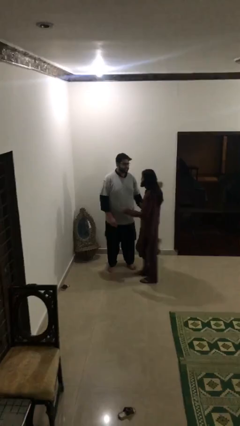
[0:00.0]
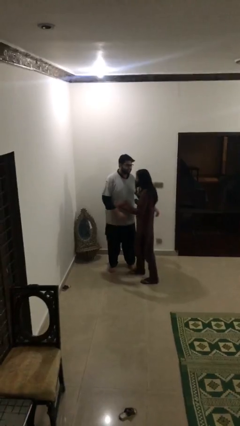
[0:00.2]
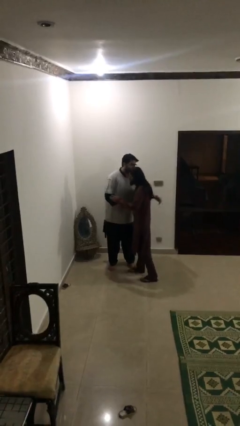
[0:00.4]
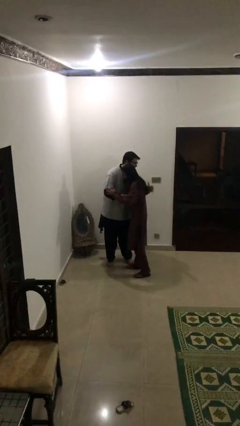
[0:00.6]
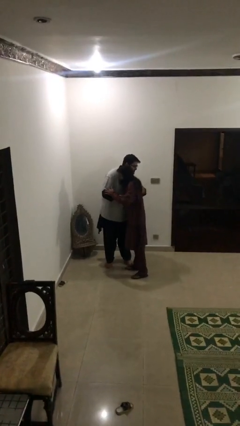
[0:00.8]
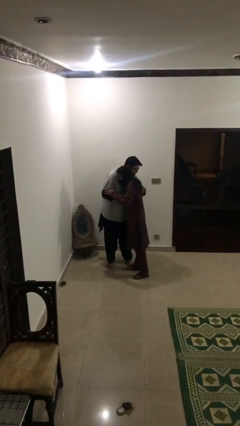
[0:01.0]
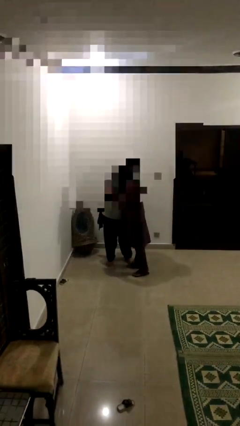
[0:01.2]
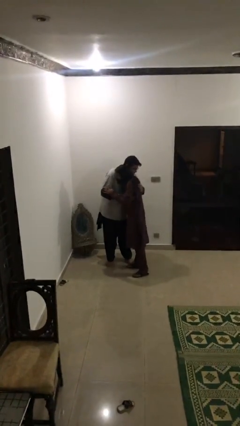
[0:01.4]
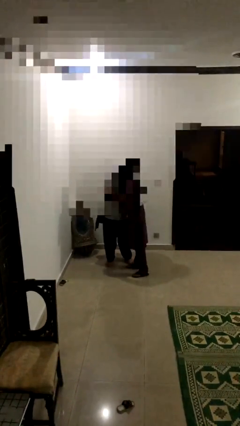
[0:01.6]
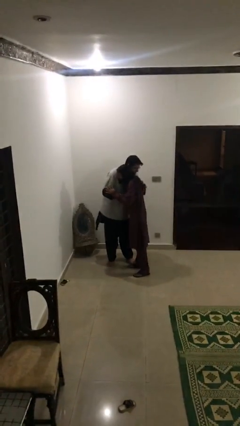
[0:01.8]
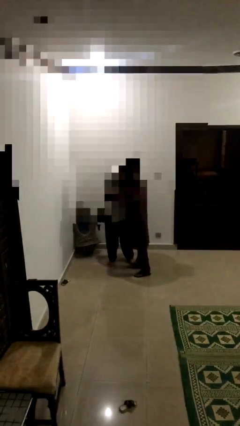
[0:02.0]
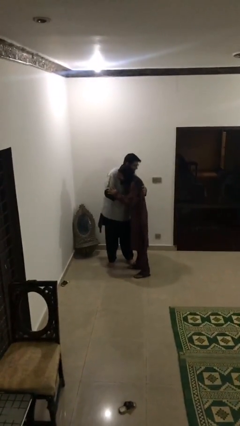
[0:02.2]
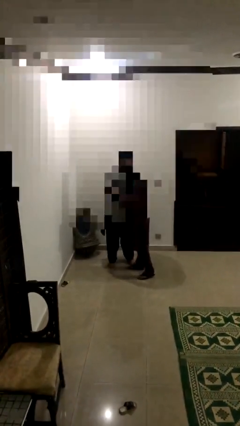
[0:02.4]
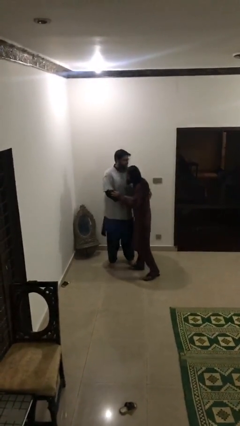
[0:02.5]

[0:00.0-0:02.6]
person embraces person

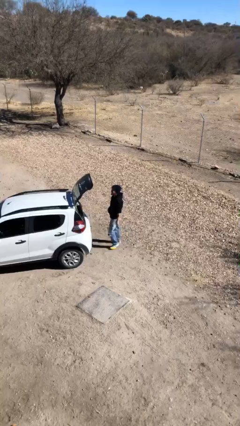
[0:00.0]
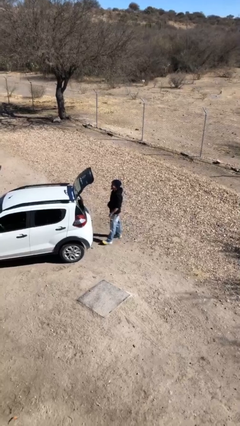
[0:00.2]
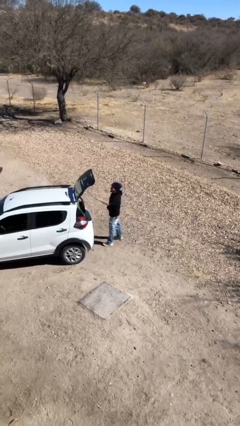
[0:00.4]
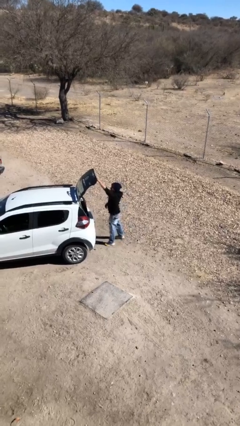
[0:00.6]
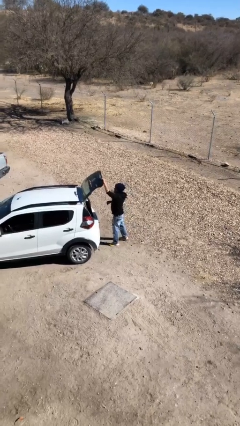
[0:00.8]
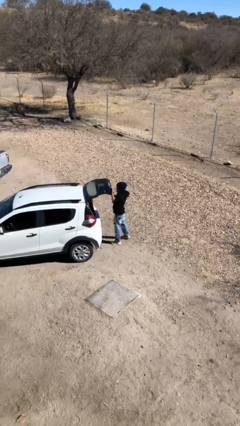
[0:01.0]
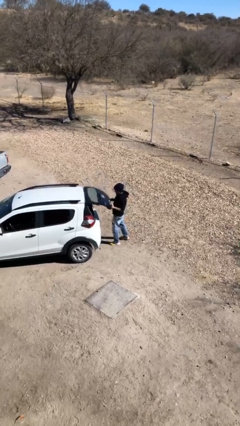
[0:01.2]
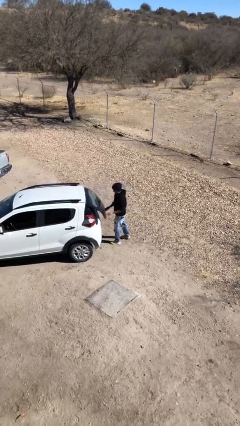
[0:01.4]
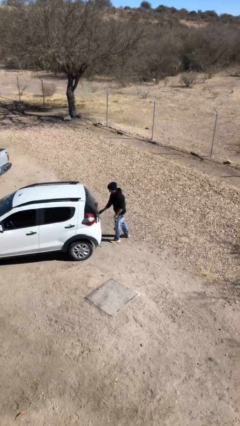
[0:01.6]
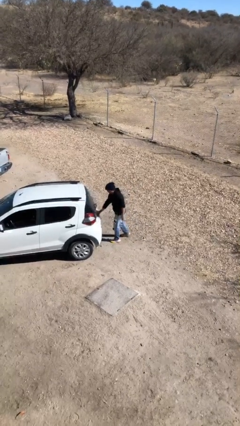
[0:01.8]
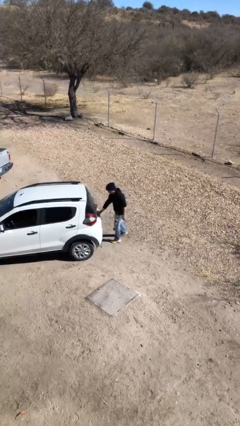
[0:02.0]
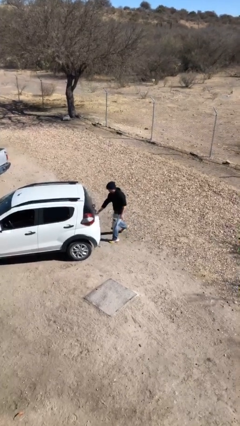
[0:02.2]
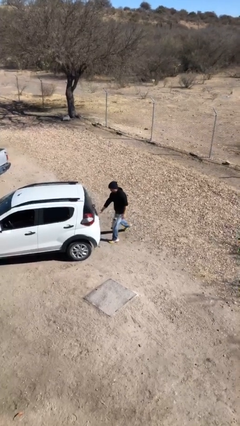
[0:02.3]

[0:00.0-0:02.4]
person closes car trunk

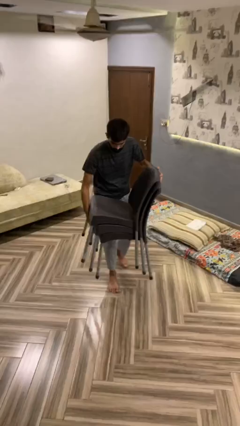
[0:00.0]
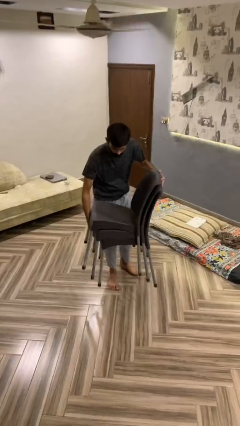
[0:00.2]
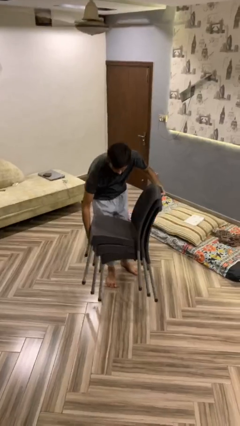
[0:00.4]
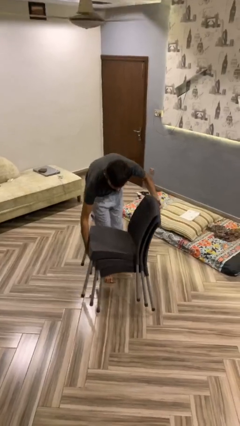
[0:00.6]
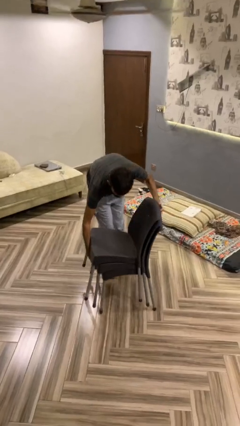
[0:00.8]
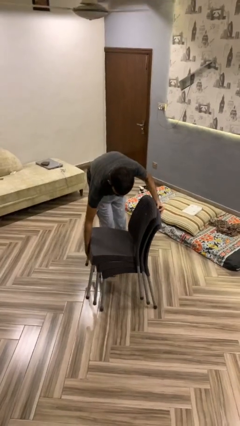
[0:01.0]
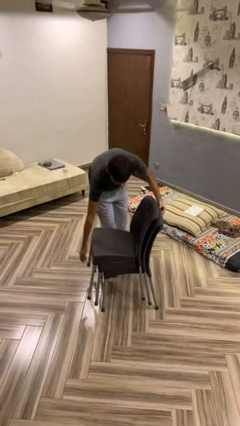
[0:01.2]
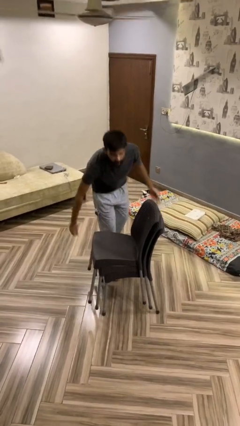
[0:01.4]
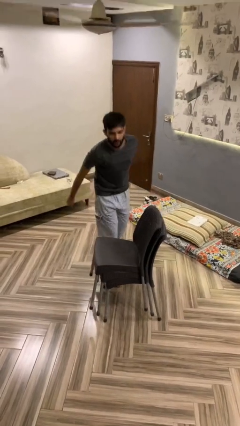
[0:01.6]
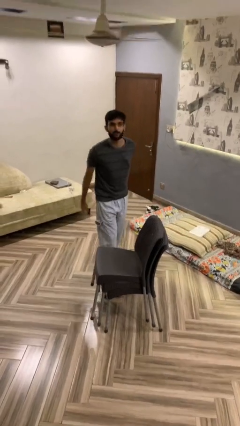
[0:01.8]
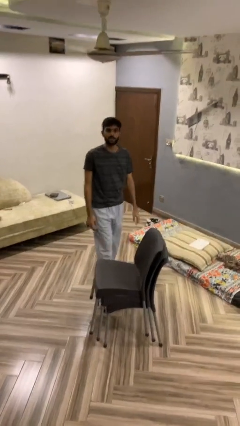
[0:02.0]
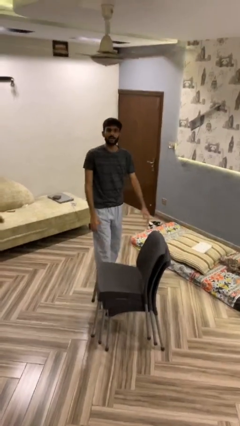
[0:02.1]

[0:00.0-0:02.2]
person puts down object on floor

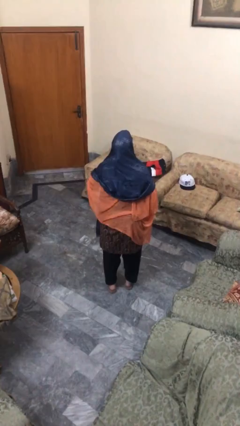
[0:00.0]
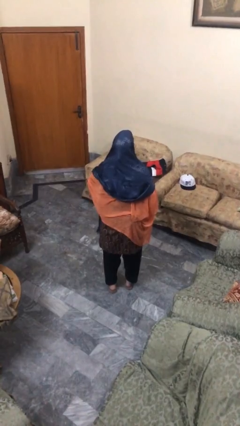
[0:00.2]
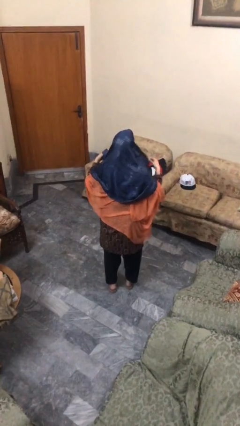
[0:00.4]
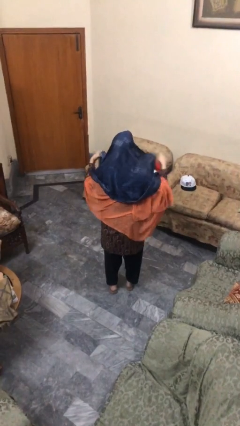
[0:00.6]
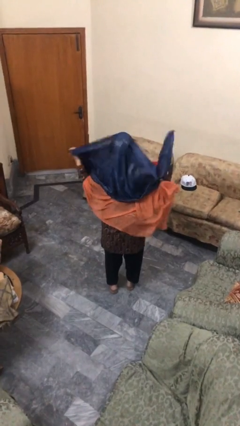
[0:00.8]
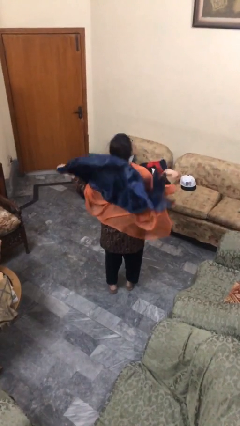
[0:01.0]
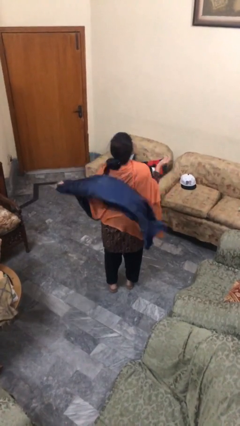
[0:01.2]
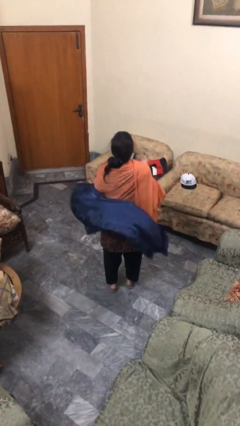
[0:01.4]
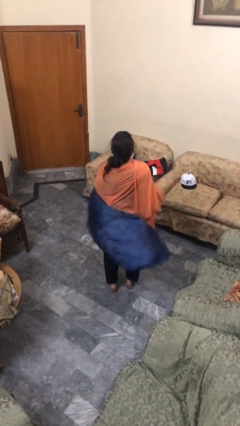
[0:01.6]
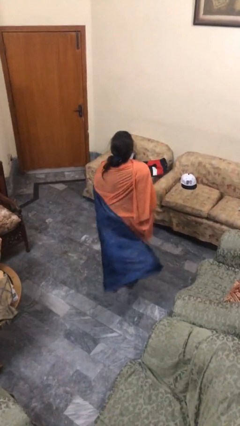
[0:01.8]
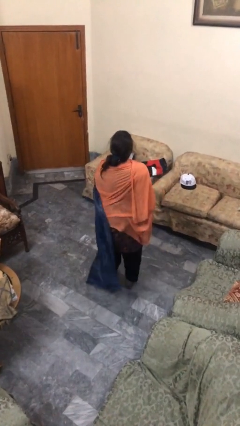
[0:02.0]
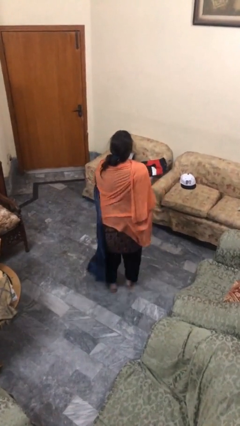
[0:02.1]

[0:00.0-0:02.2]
person takes off scarf

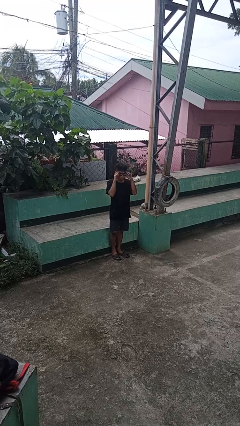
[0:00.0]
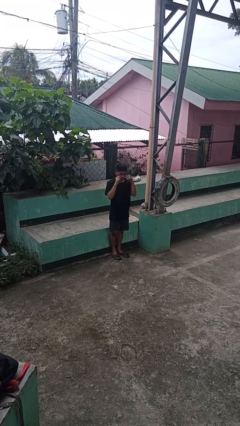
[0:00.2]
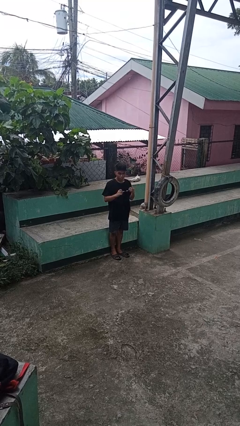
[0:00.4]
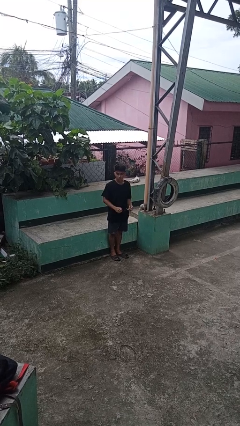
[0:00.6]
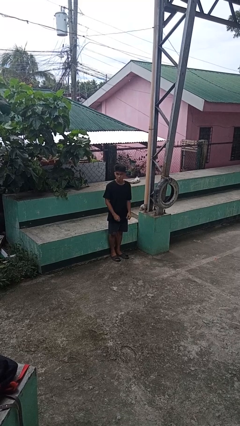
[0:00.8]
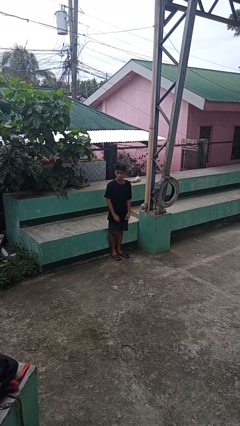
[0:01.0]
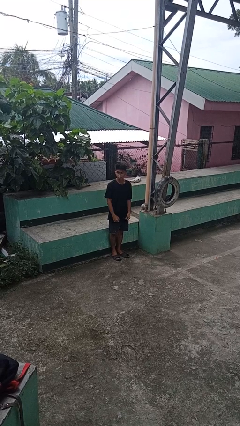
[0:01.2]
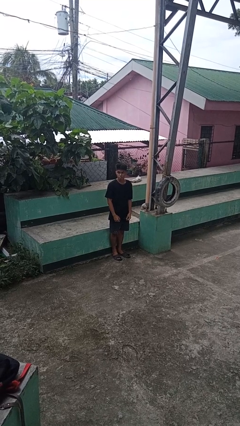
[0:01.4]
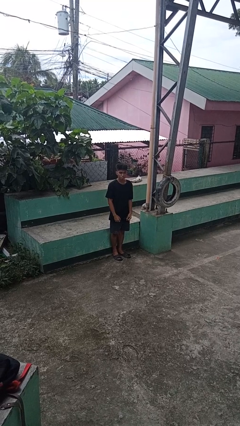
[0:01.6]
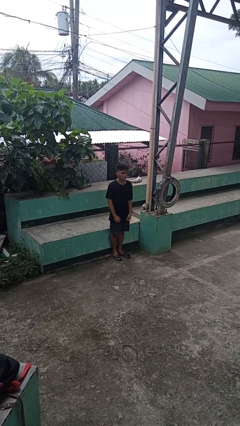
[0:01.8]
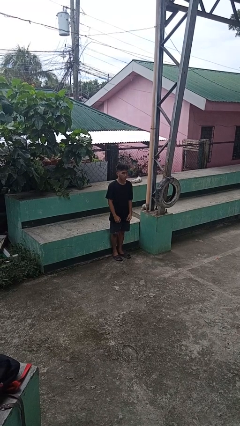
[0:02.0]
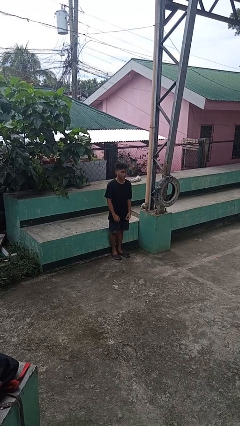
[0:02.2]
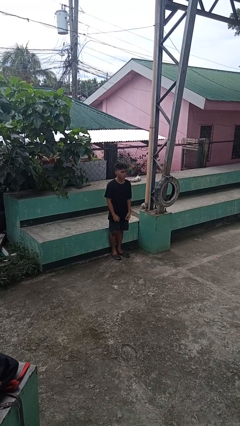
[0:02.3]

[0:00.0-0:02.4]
person takes off sunglasses

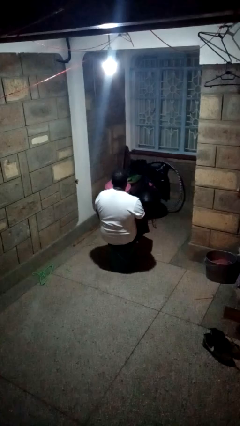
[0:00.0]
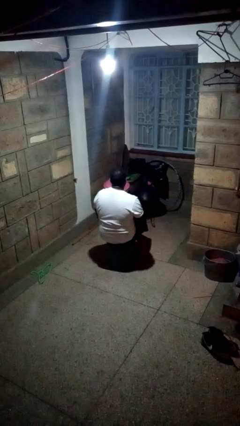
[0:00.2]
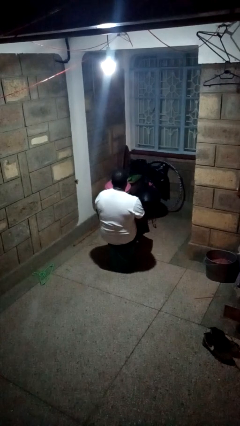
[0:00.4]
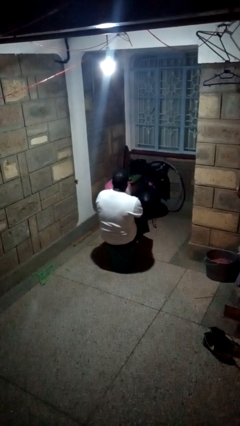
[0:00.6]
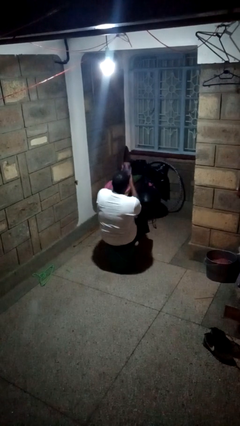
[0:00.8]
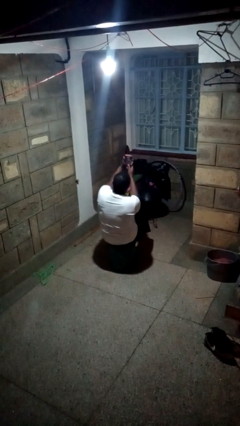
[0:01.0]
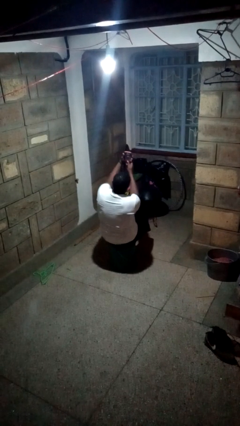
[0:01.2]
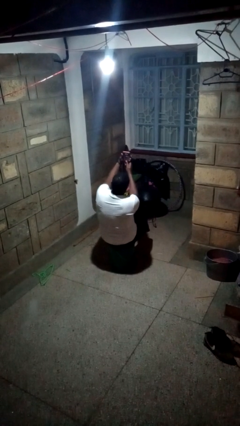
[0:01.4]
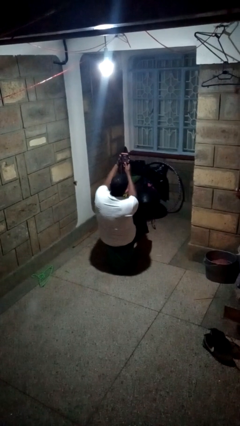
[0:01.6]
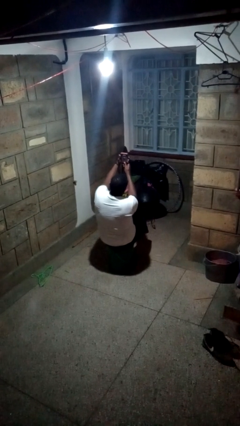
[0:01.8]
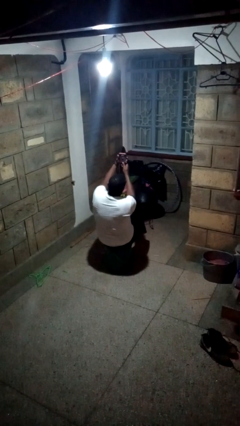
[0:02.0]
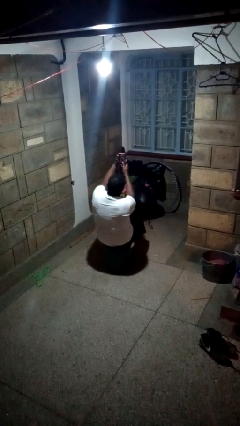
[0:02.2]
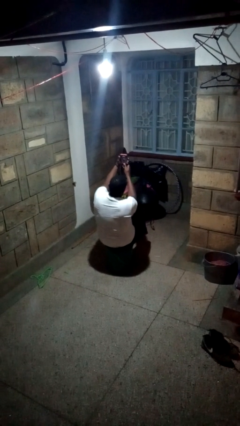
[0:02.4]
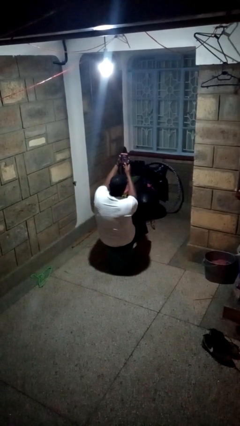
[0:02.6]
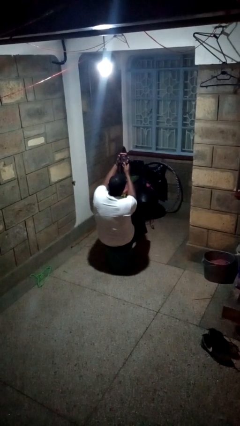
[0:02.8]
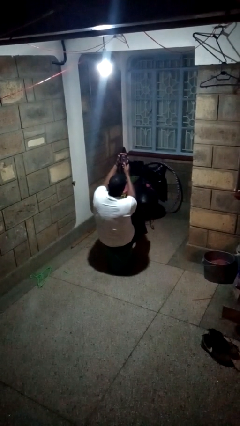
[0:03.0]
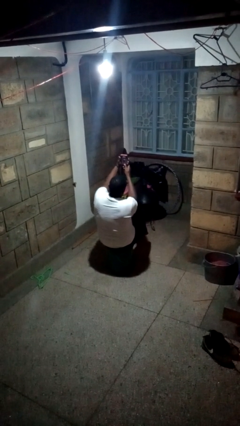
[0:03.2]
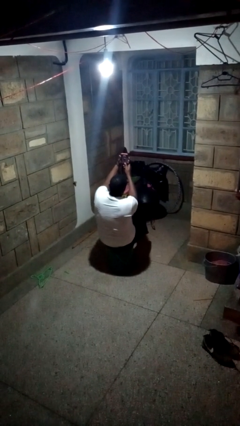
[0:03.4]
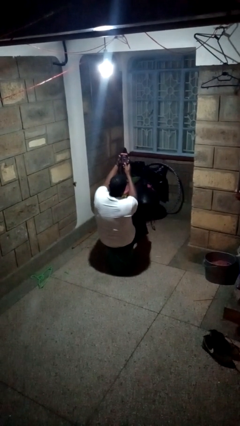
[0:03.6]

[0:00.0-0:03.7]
person takes selfie

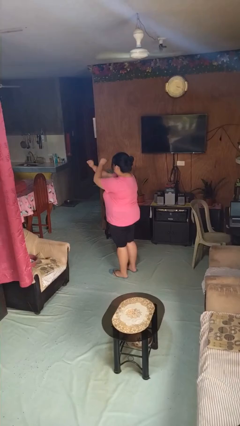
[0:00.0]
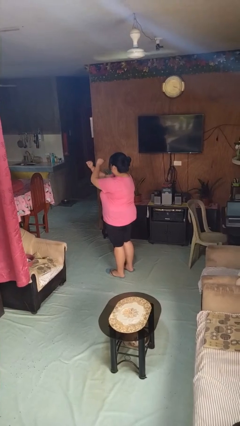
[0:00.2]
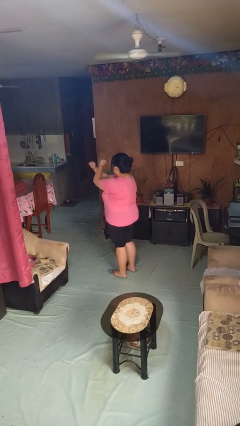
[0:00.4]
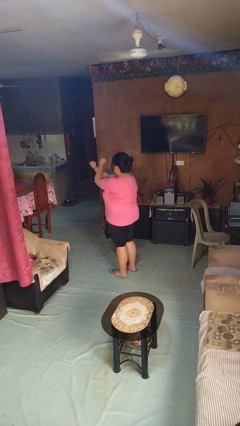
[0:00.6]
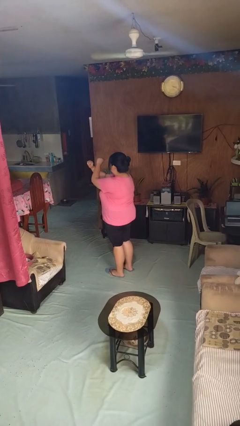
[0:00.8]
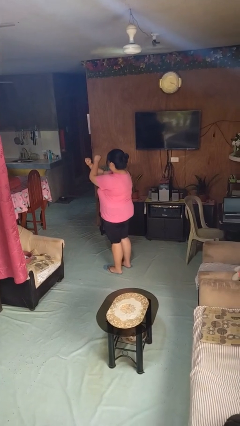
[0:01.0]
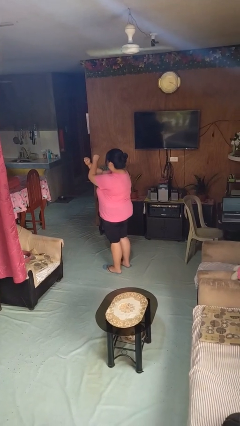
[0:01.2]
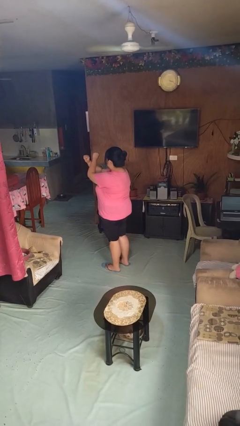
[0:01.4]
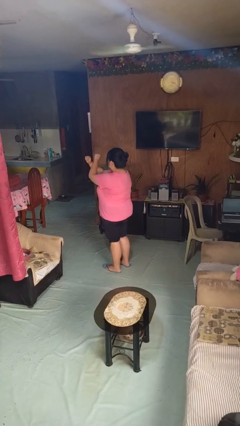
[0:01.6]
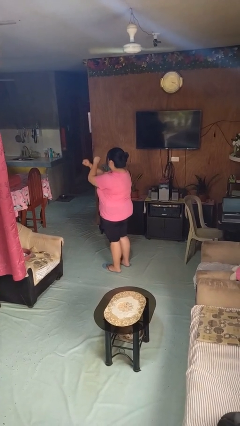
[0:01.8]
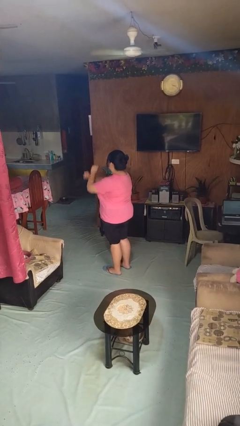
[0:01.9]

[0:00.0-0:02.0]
person gestures arms x
